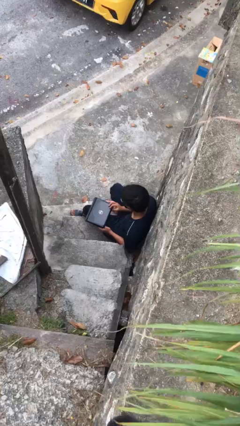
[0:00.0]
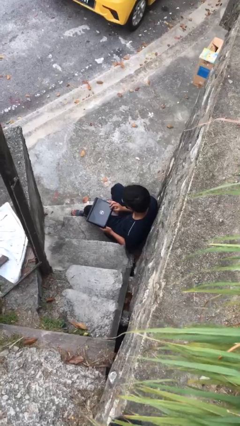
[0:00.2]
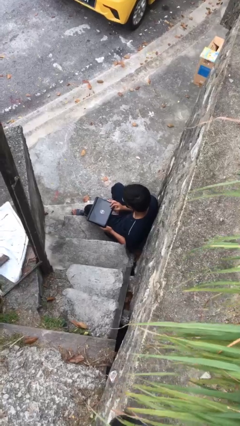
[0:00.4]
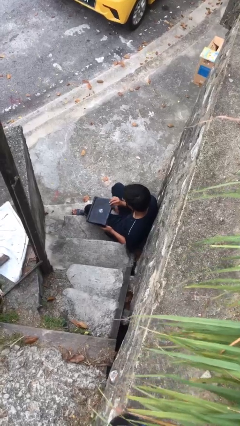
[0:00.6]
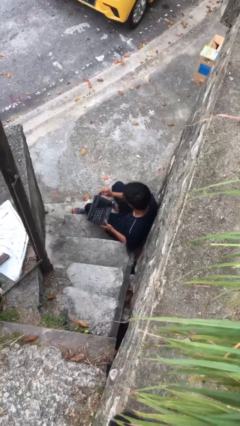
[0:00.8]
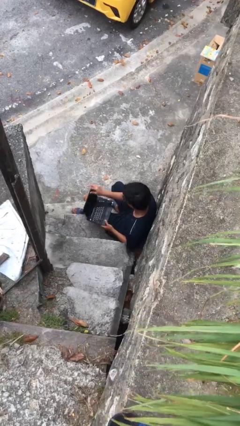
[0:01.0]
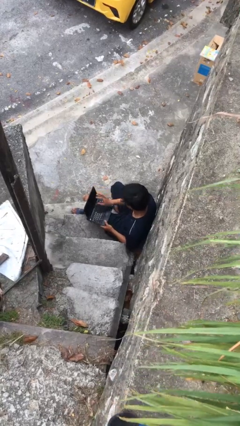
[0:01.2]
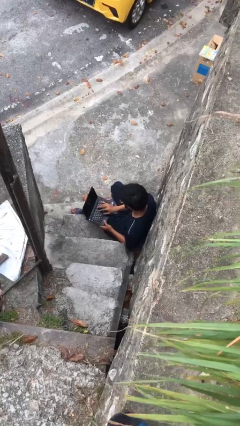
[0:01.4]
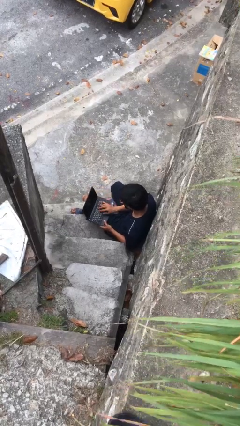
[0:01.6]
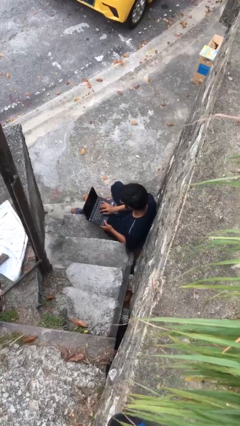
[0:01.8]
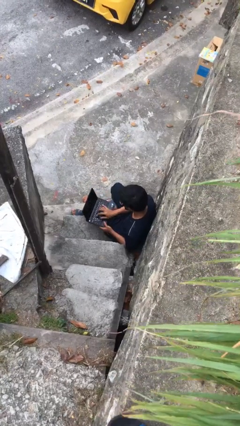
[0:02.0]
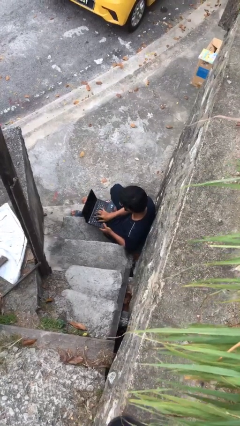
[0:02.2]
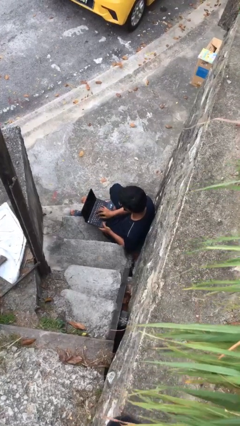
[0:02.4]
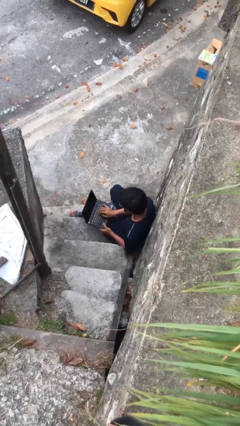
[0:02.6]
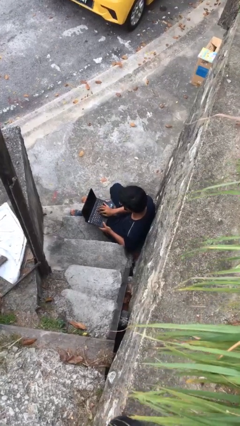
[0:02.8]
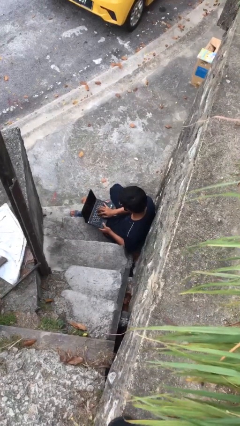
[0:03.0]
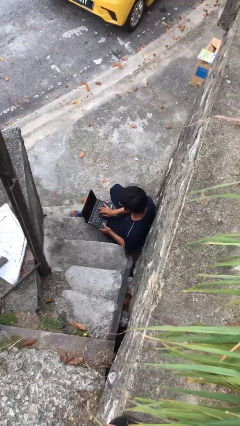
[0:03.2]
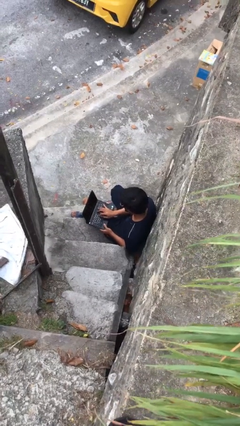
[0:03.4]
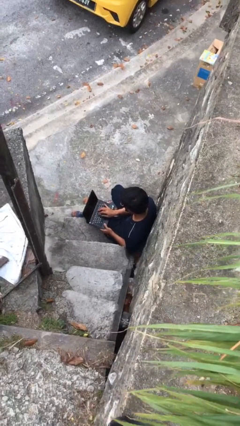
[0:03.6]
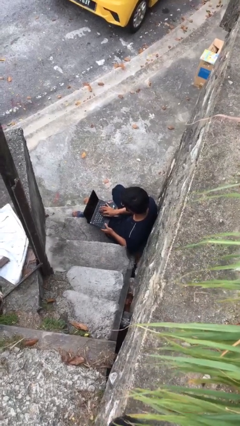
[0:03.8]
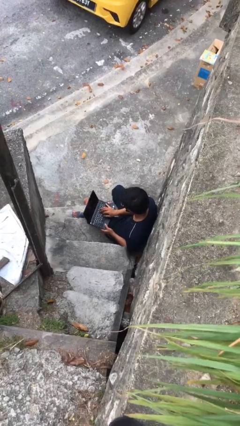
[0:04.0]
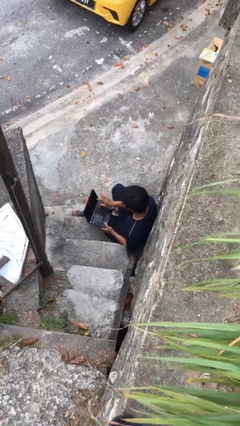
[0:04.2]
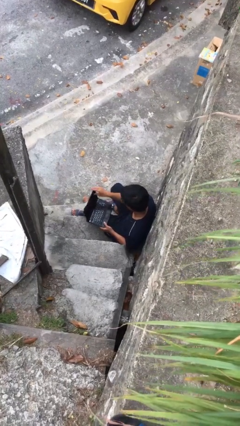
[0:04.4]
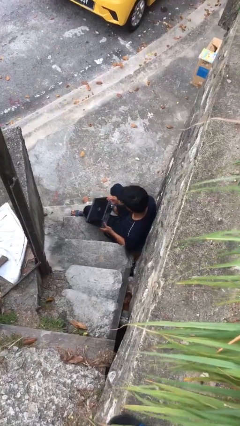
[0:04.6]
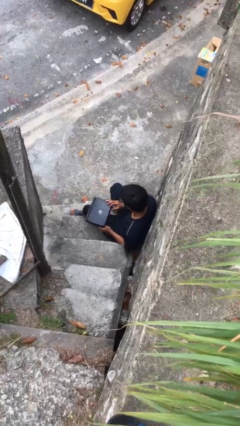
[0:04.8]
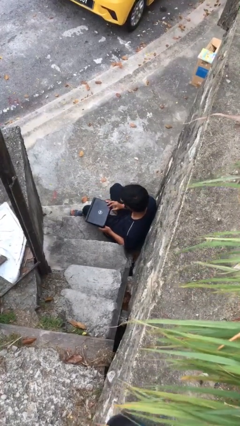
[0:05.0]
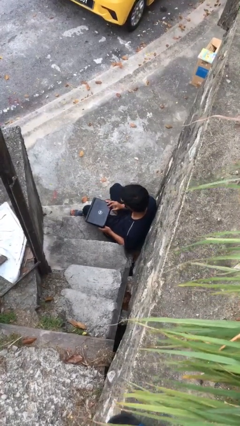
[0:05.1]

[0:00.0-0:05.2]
person interacts with laptop

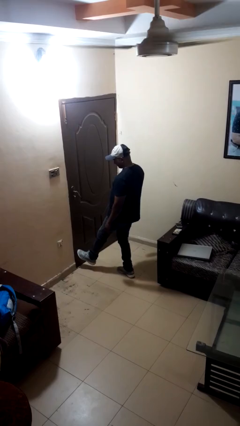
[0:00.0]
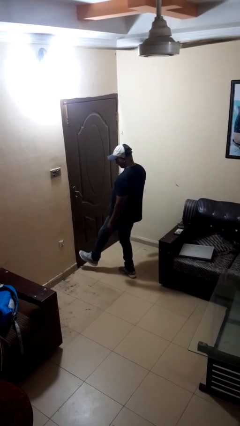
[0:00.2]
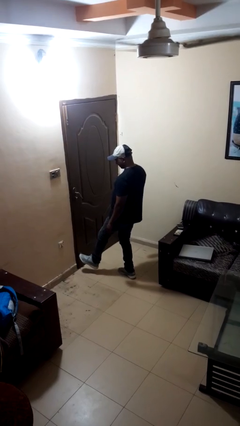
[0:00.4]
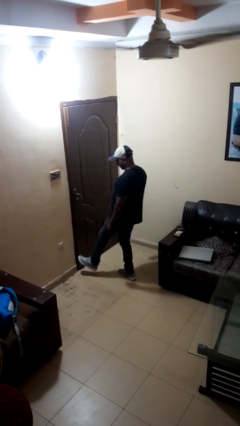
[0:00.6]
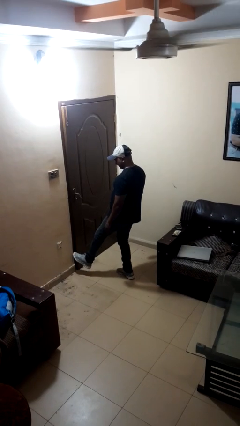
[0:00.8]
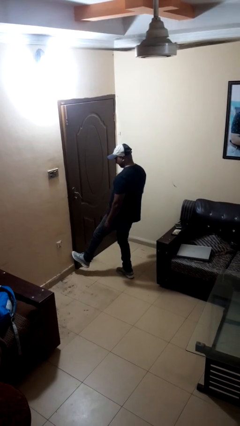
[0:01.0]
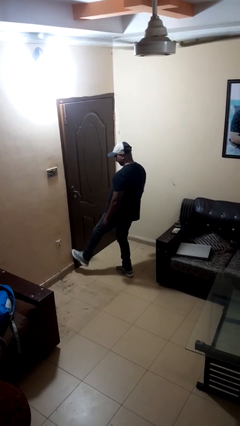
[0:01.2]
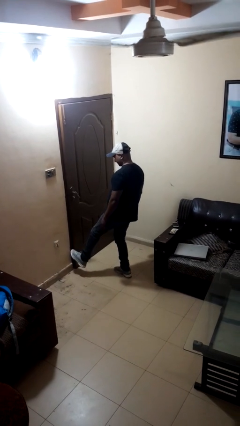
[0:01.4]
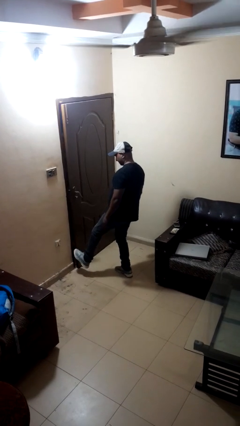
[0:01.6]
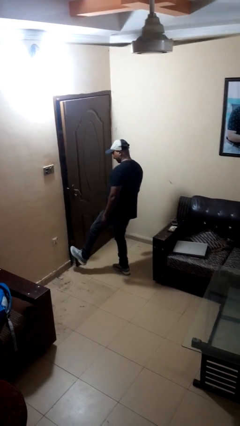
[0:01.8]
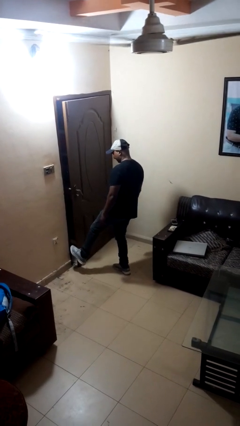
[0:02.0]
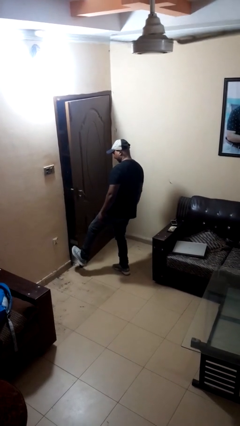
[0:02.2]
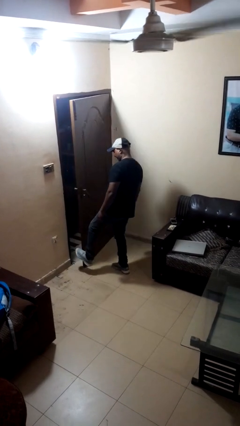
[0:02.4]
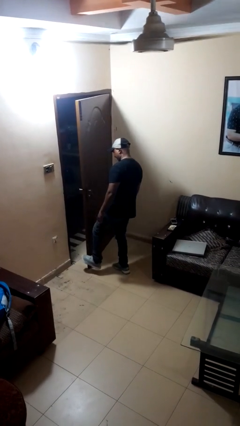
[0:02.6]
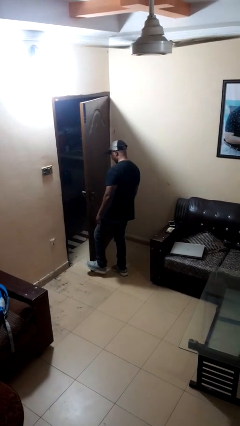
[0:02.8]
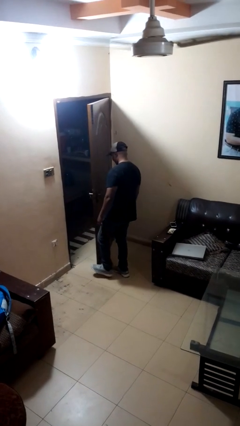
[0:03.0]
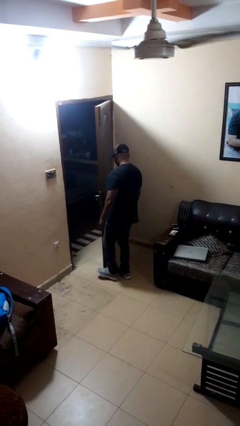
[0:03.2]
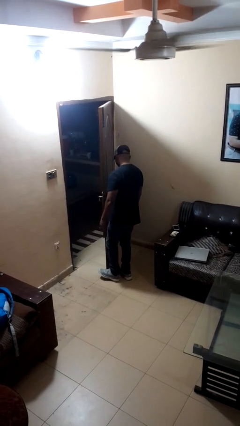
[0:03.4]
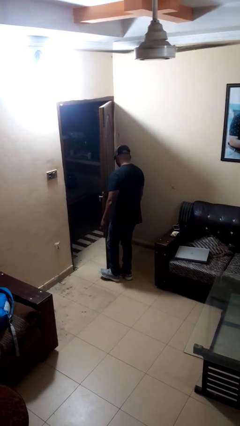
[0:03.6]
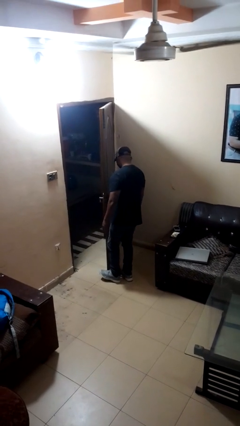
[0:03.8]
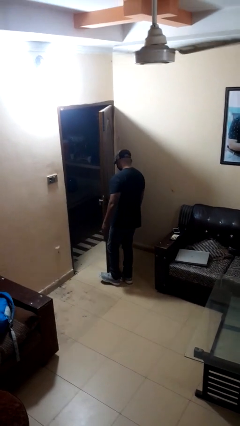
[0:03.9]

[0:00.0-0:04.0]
person opens facility door

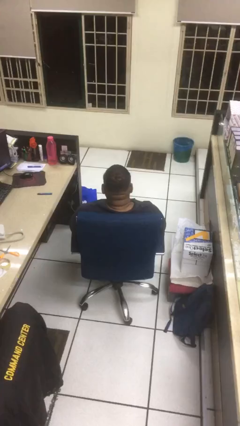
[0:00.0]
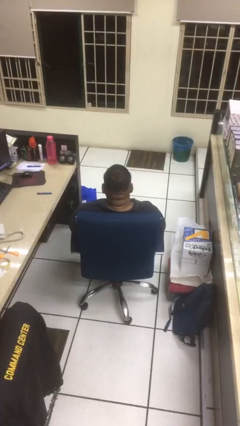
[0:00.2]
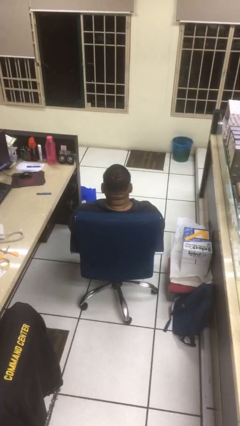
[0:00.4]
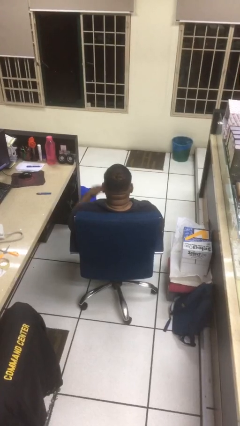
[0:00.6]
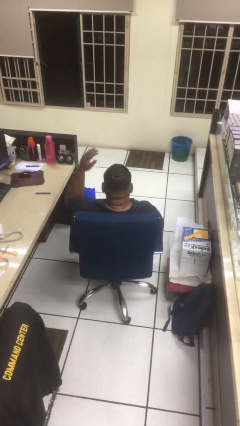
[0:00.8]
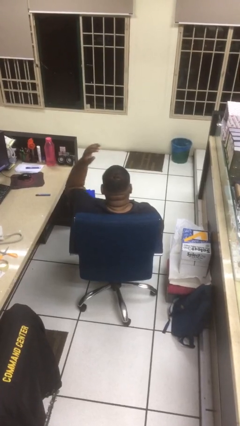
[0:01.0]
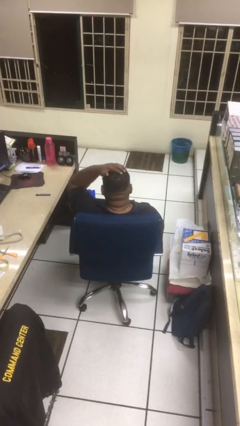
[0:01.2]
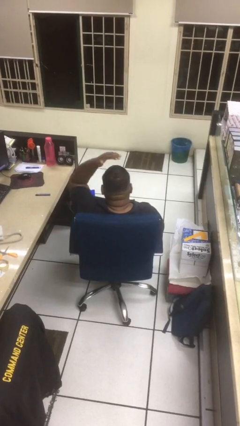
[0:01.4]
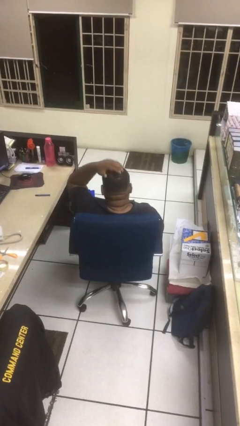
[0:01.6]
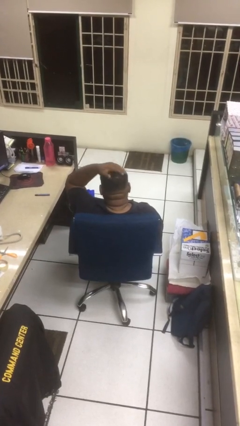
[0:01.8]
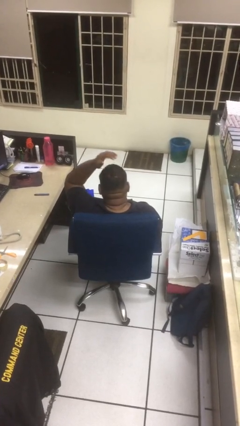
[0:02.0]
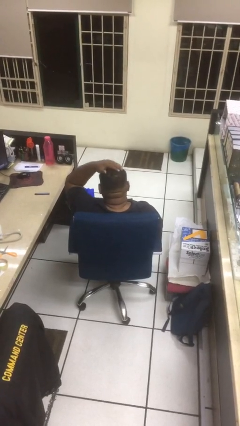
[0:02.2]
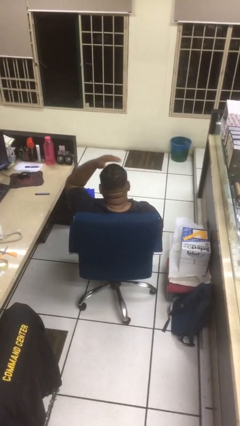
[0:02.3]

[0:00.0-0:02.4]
person pats head

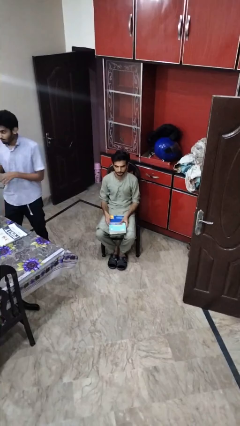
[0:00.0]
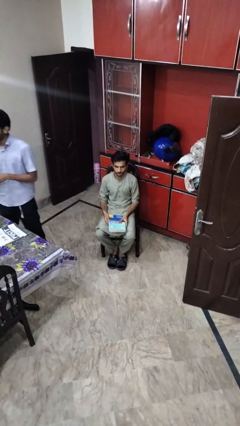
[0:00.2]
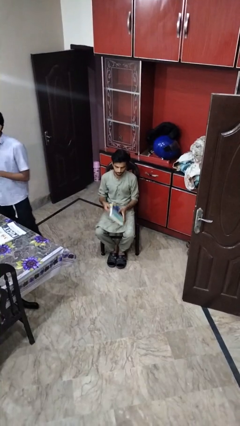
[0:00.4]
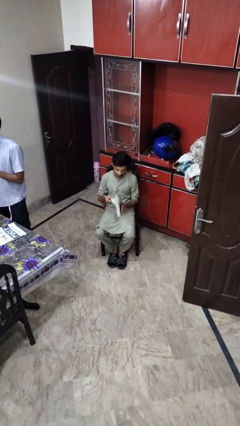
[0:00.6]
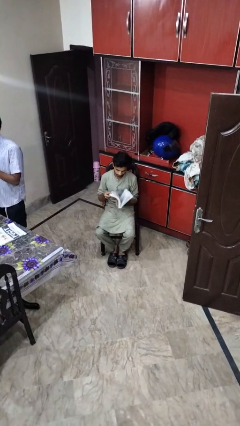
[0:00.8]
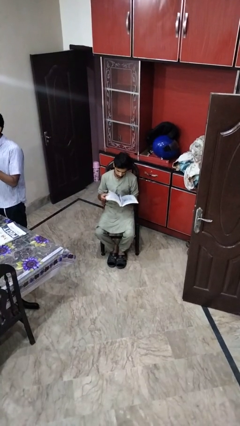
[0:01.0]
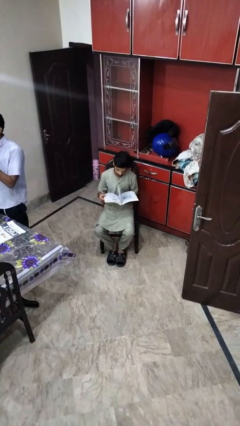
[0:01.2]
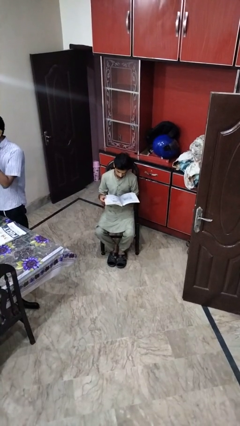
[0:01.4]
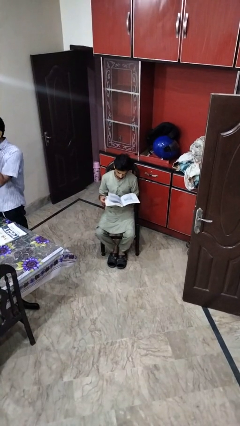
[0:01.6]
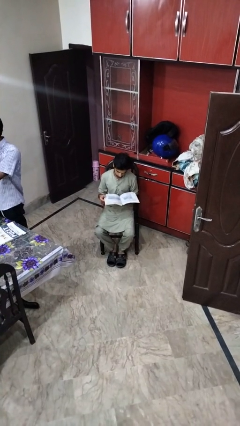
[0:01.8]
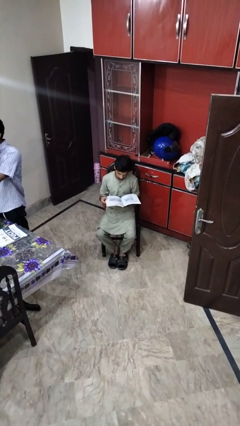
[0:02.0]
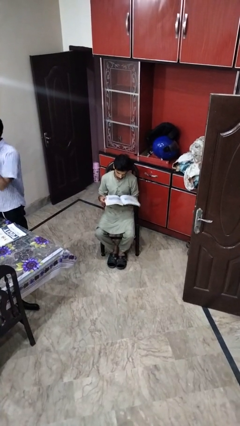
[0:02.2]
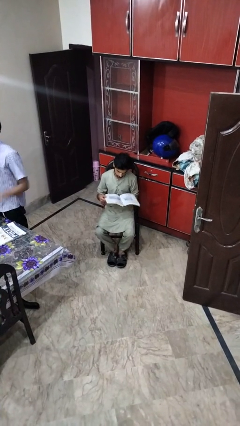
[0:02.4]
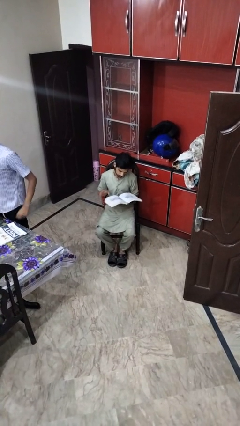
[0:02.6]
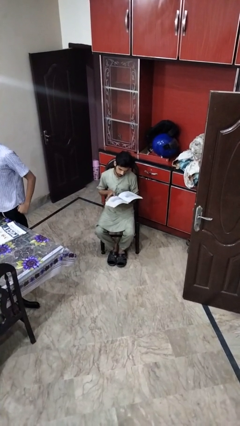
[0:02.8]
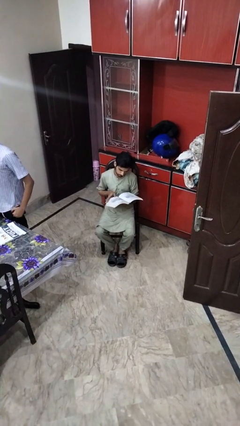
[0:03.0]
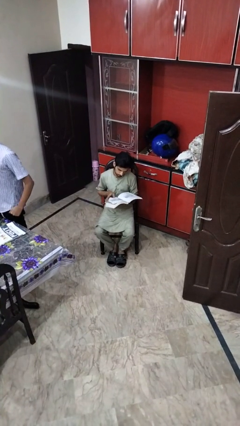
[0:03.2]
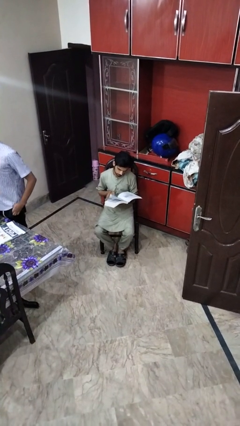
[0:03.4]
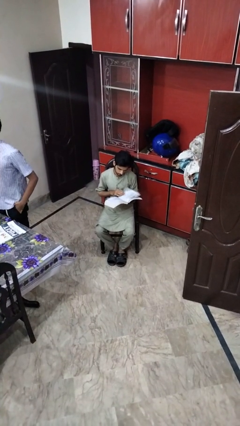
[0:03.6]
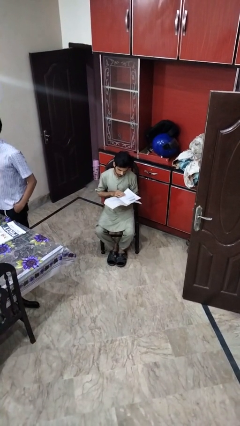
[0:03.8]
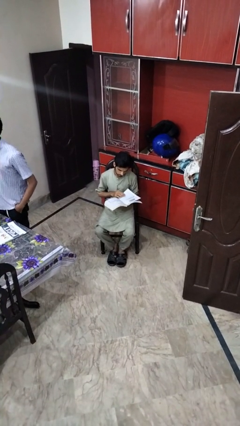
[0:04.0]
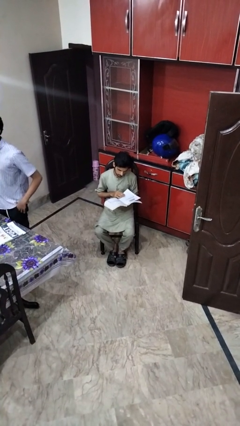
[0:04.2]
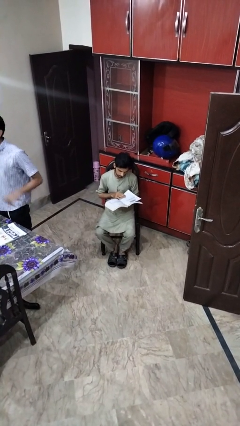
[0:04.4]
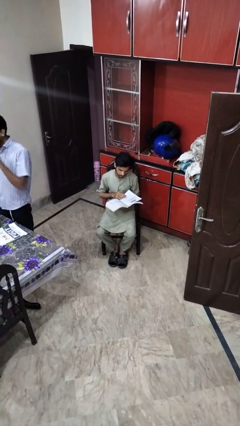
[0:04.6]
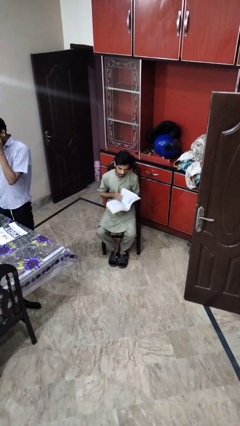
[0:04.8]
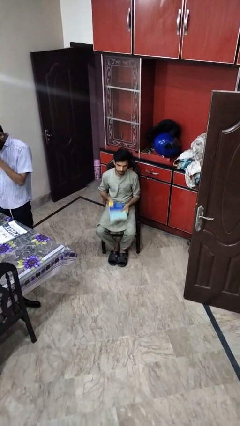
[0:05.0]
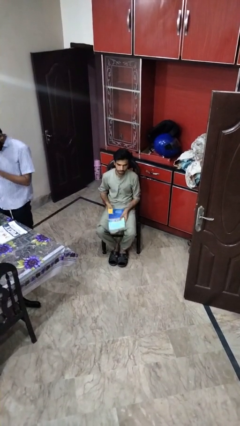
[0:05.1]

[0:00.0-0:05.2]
person reads book

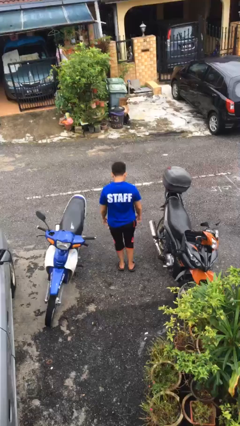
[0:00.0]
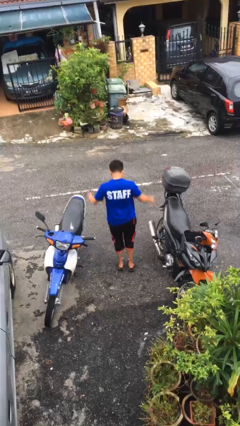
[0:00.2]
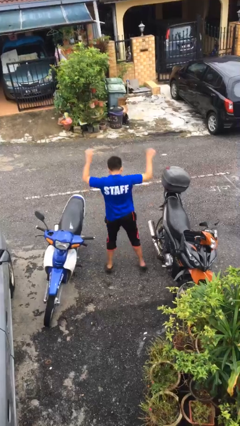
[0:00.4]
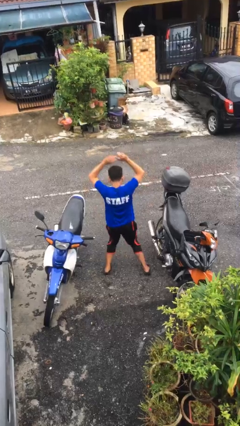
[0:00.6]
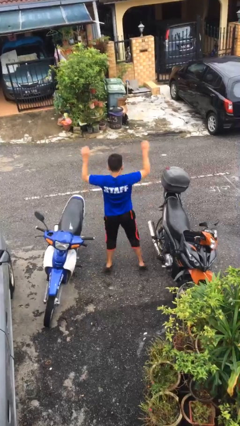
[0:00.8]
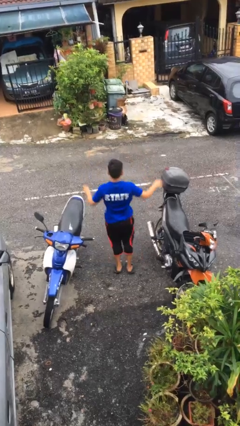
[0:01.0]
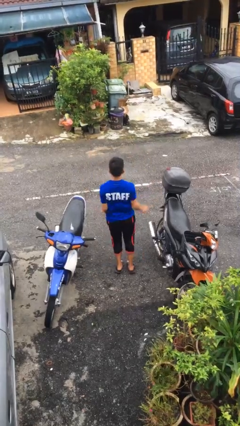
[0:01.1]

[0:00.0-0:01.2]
person exercises with jumping jacks
